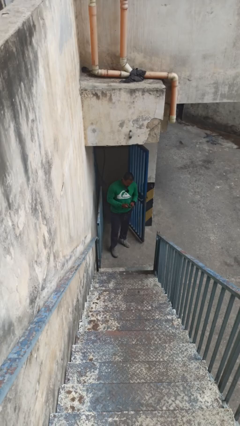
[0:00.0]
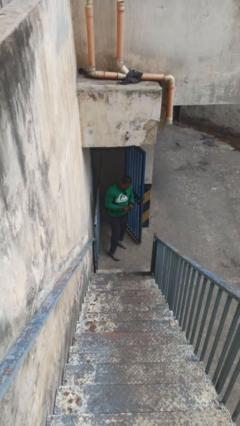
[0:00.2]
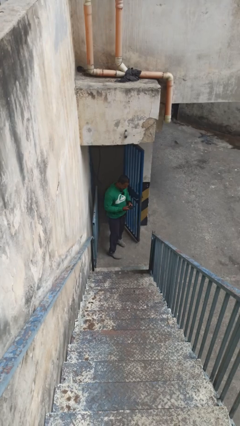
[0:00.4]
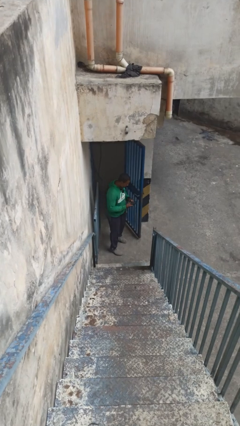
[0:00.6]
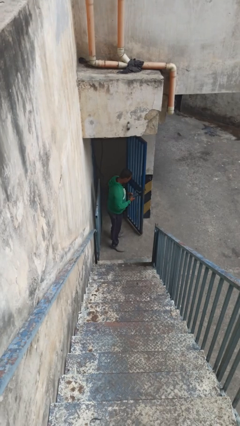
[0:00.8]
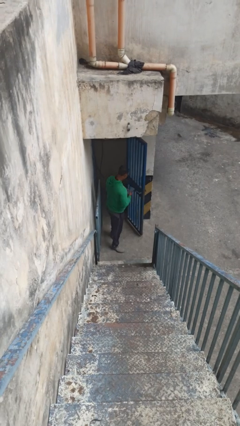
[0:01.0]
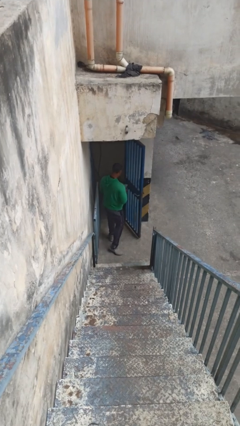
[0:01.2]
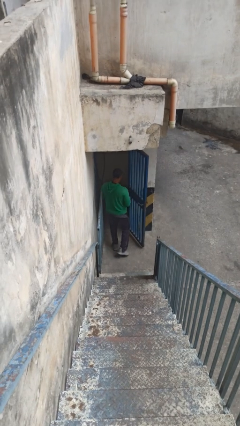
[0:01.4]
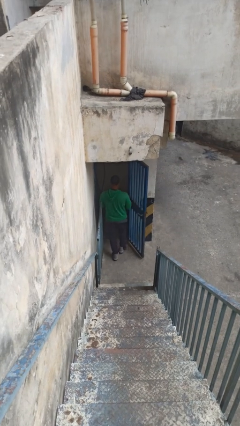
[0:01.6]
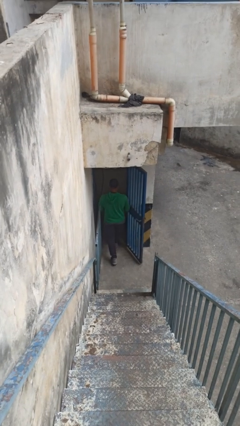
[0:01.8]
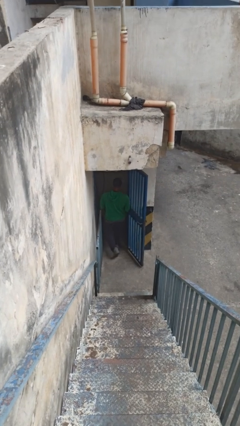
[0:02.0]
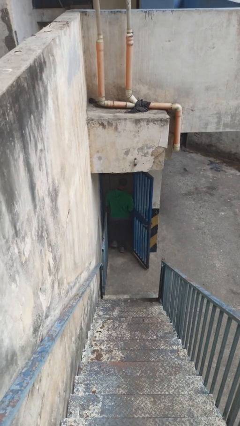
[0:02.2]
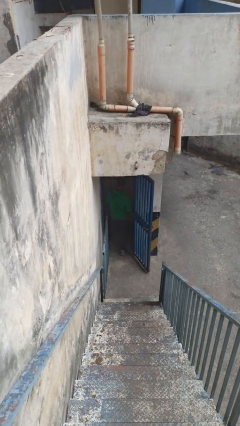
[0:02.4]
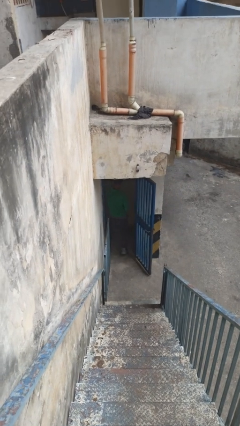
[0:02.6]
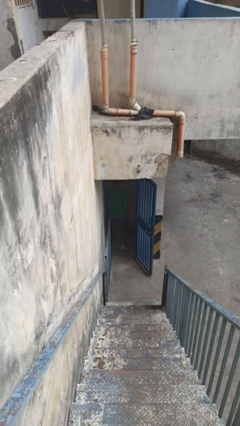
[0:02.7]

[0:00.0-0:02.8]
person exits scene through structure

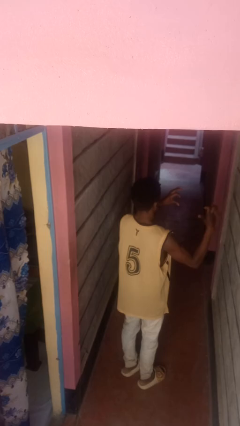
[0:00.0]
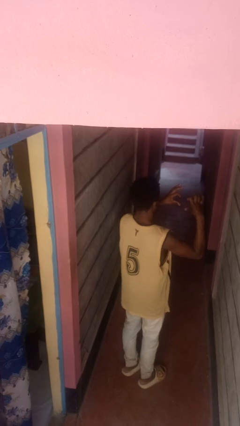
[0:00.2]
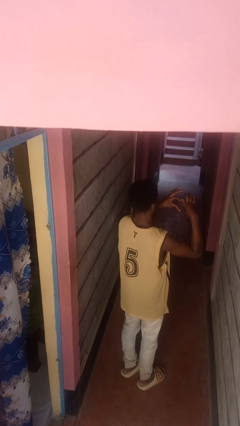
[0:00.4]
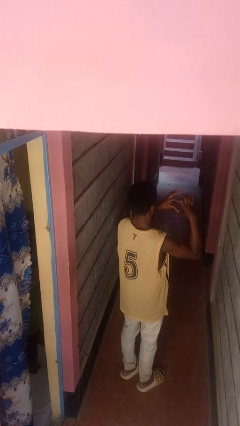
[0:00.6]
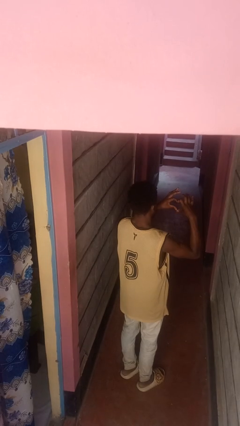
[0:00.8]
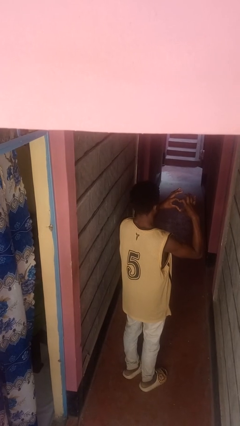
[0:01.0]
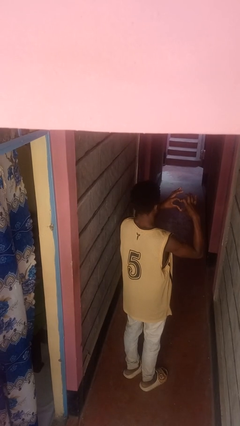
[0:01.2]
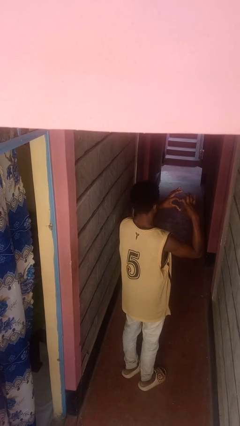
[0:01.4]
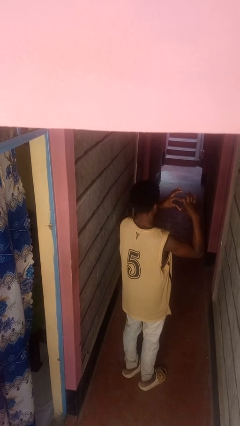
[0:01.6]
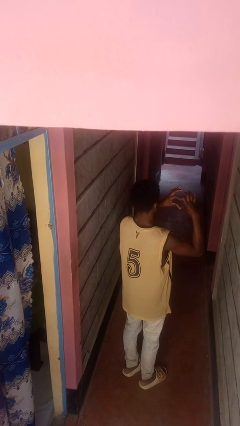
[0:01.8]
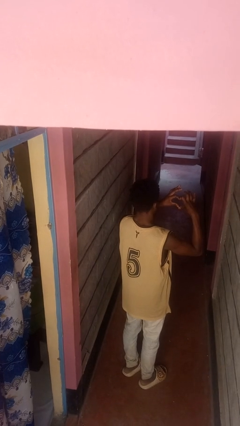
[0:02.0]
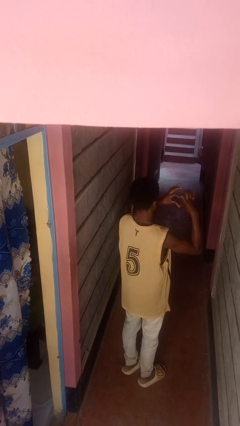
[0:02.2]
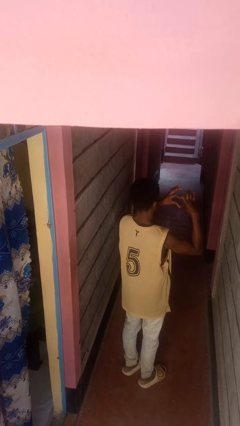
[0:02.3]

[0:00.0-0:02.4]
person gestures heart

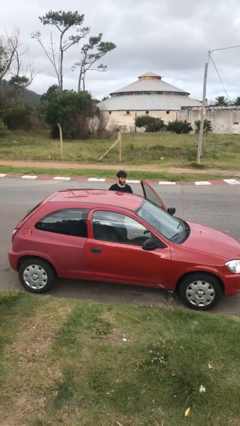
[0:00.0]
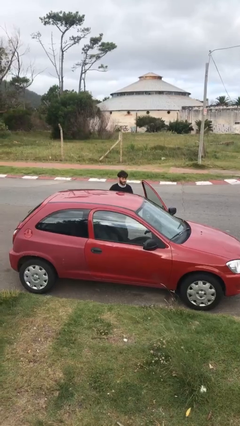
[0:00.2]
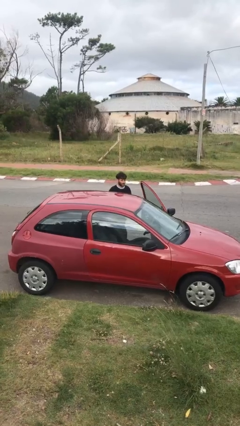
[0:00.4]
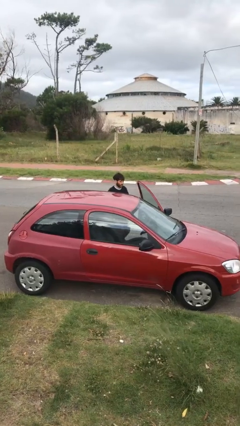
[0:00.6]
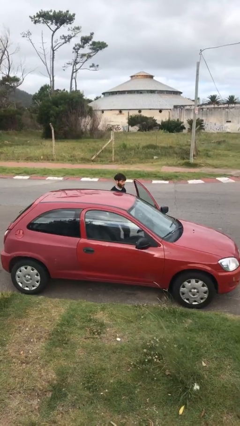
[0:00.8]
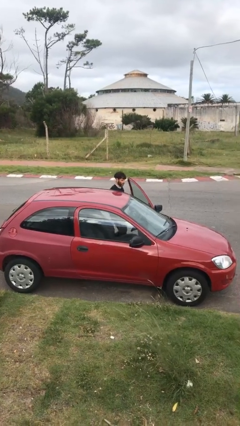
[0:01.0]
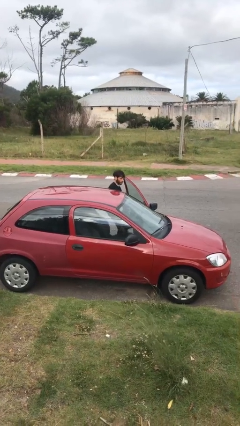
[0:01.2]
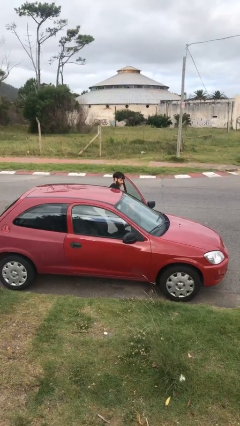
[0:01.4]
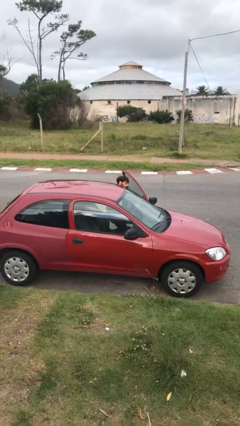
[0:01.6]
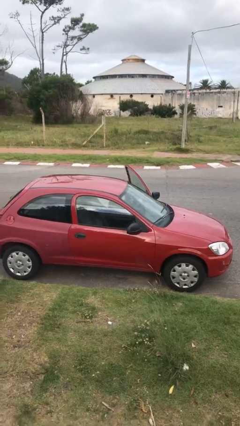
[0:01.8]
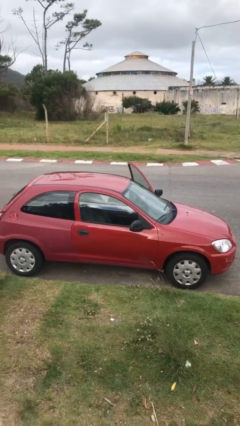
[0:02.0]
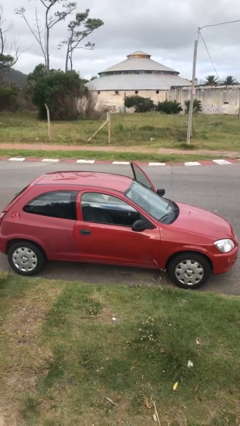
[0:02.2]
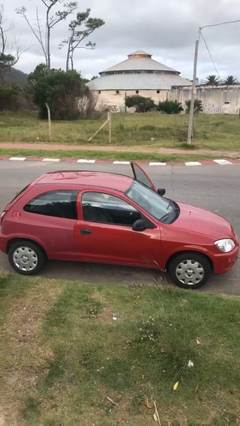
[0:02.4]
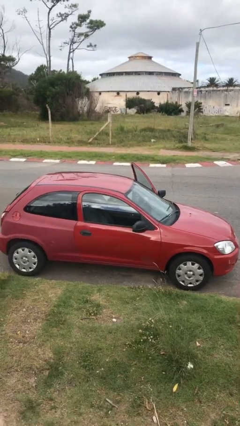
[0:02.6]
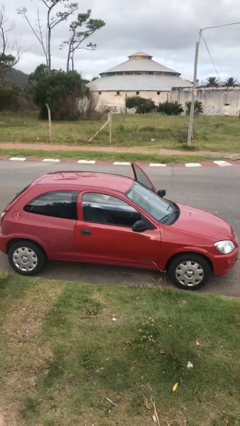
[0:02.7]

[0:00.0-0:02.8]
person enters car

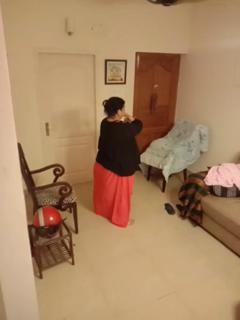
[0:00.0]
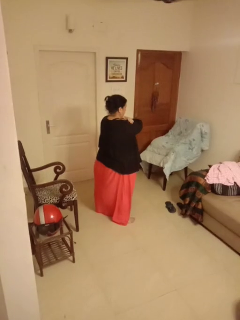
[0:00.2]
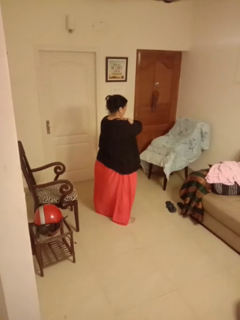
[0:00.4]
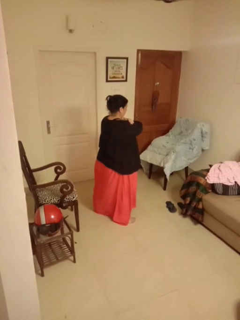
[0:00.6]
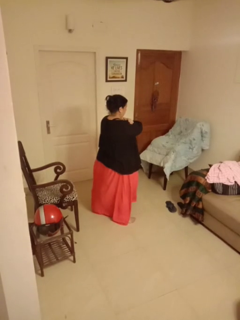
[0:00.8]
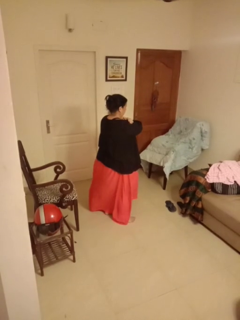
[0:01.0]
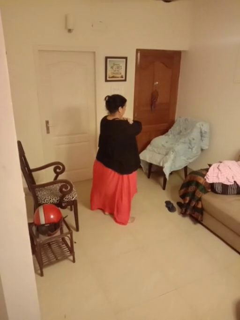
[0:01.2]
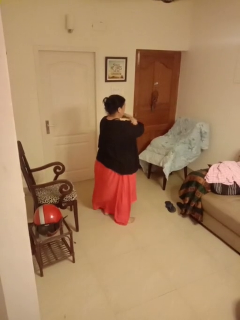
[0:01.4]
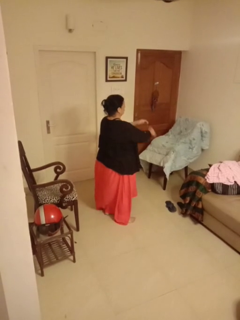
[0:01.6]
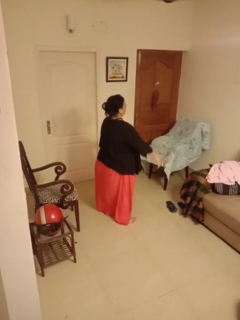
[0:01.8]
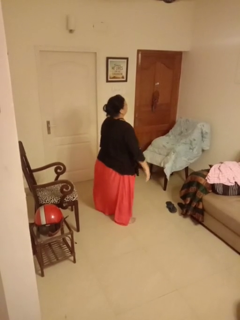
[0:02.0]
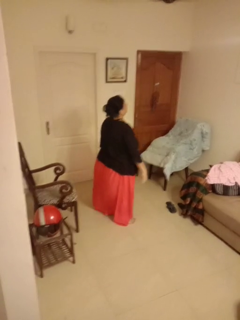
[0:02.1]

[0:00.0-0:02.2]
person gestures arms x

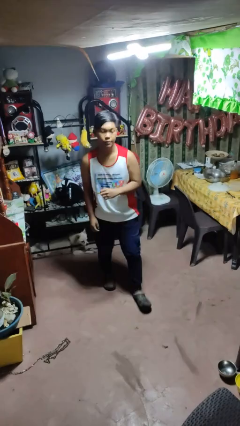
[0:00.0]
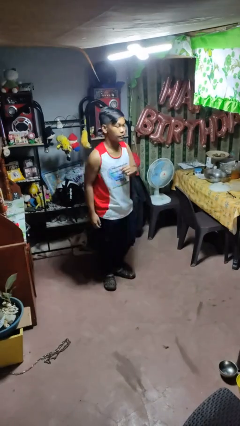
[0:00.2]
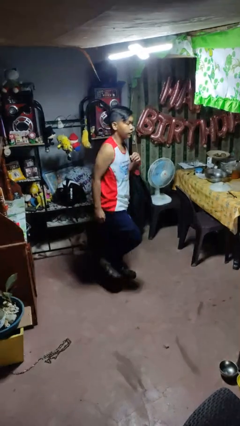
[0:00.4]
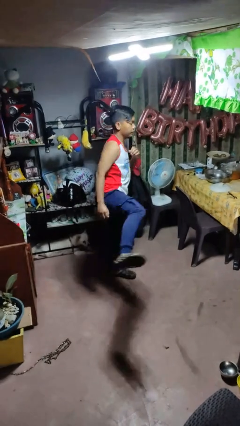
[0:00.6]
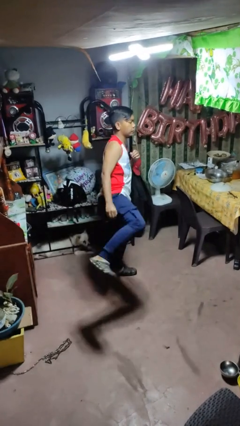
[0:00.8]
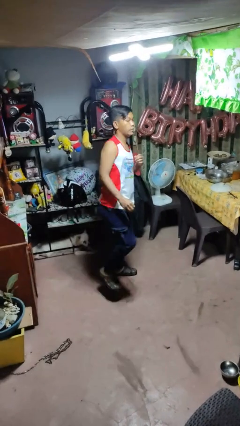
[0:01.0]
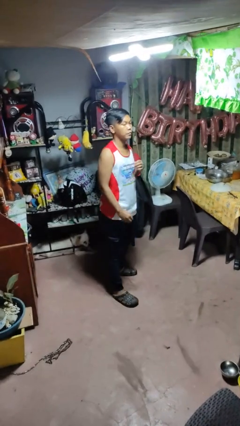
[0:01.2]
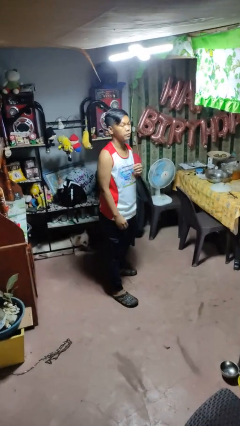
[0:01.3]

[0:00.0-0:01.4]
person karate kicks

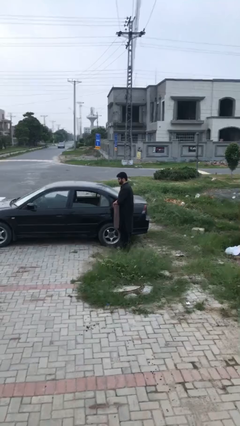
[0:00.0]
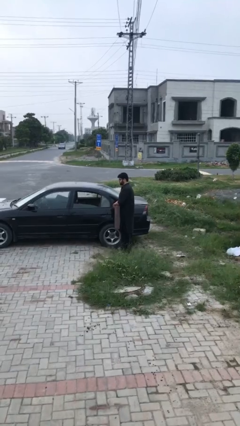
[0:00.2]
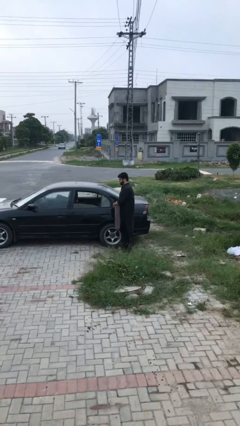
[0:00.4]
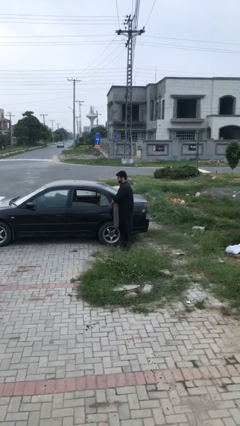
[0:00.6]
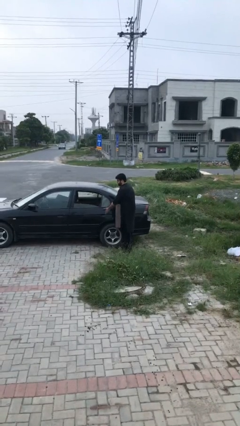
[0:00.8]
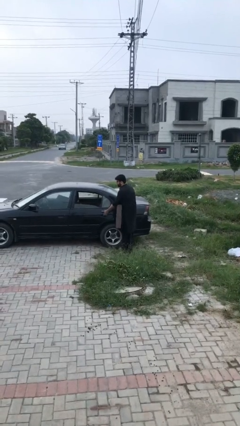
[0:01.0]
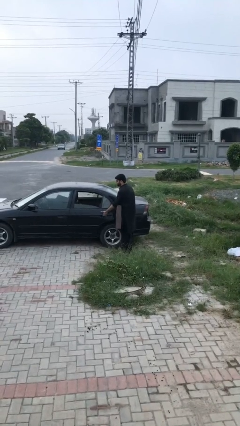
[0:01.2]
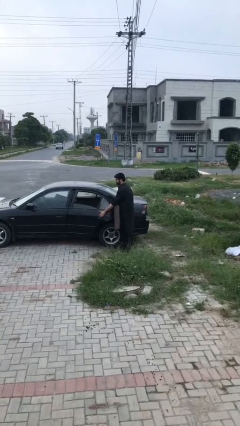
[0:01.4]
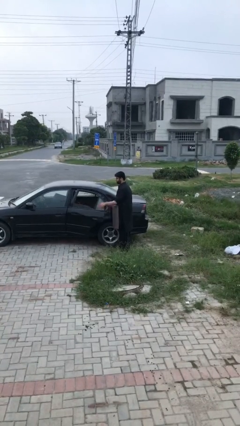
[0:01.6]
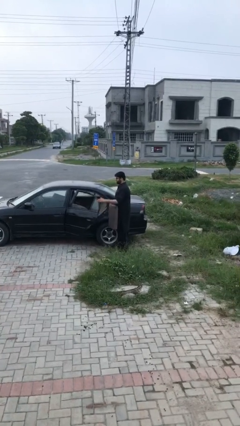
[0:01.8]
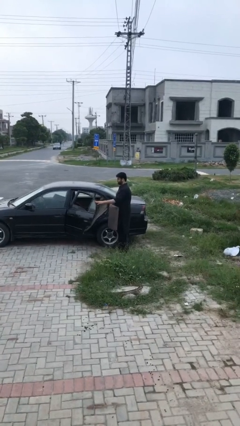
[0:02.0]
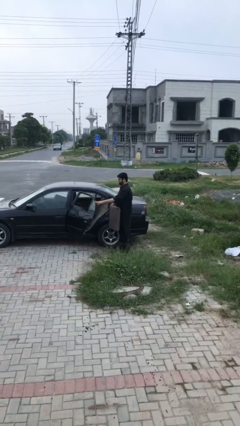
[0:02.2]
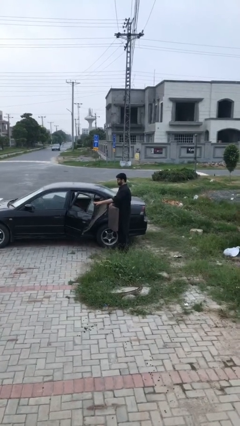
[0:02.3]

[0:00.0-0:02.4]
person opens car door

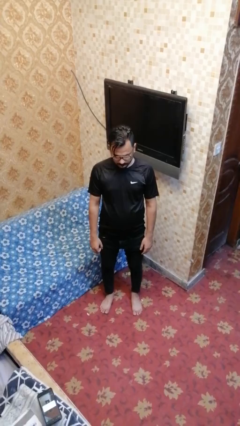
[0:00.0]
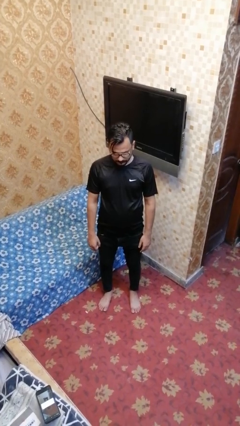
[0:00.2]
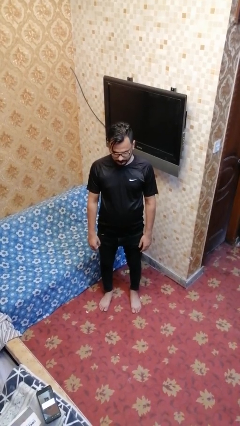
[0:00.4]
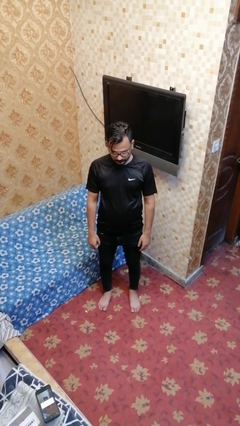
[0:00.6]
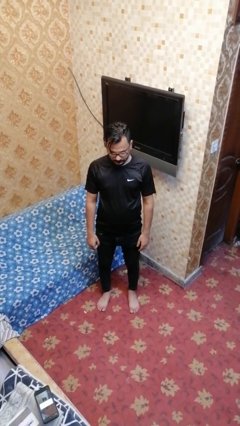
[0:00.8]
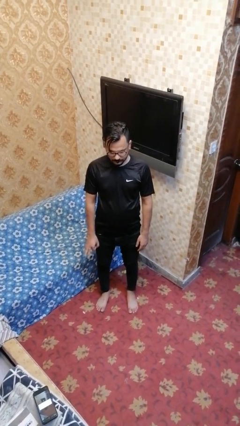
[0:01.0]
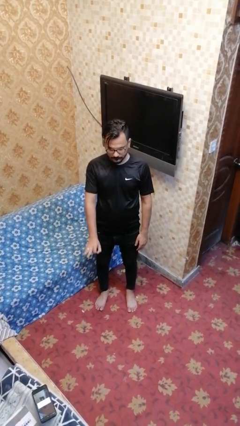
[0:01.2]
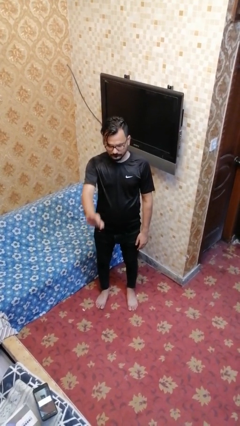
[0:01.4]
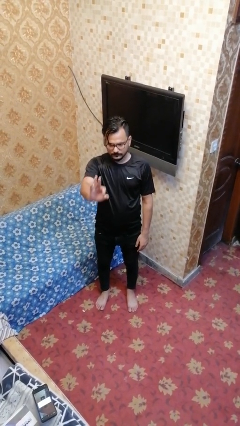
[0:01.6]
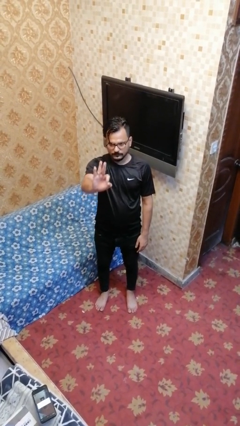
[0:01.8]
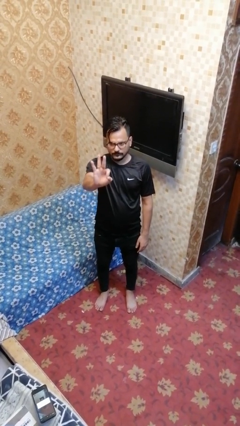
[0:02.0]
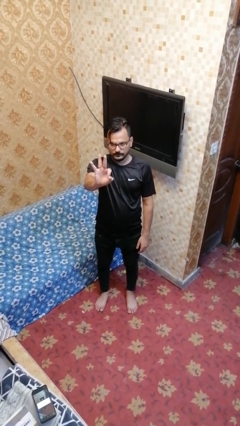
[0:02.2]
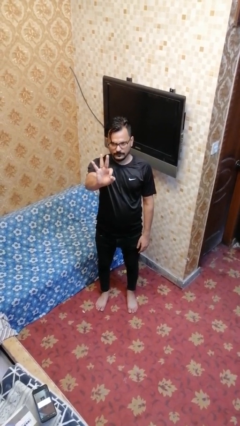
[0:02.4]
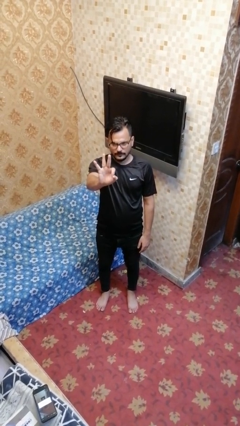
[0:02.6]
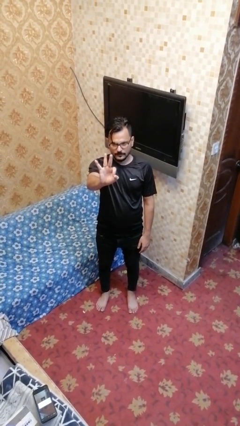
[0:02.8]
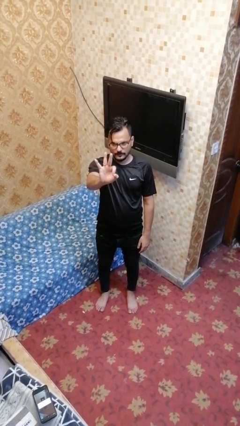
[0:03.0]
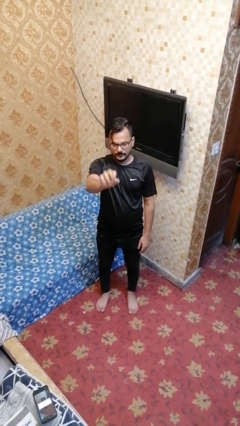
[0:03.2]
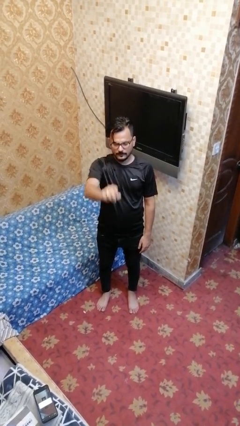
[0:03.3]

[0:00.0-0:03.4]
person gestures number three

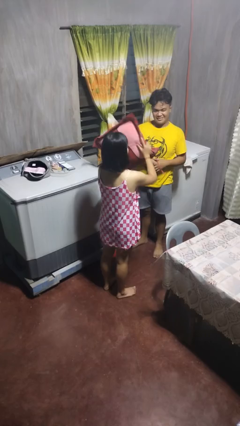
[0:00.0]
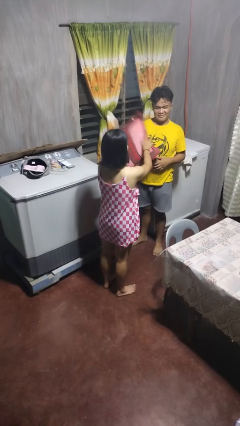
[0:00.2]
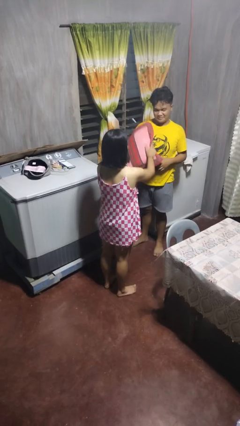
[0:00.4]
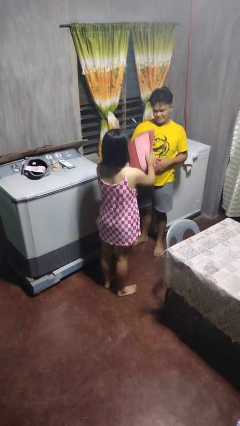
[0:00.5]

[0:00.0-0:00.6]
person hits person with pillow
